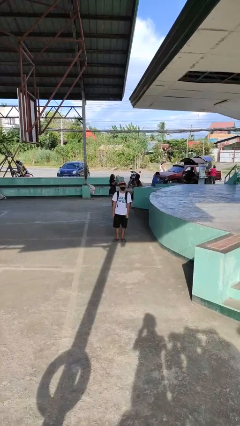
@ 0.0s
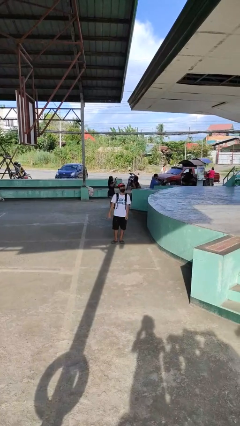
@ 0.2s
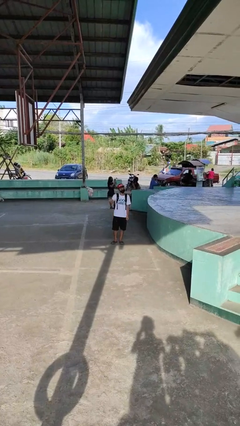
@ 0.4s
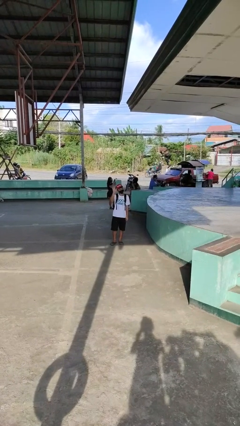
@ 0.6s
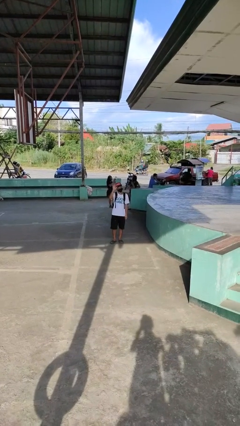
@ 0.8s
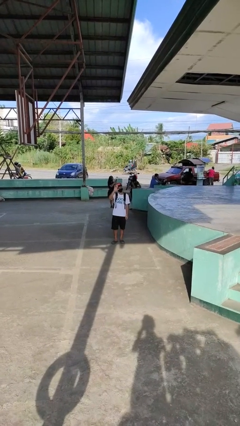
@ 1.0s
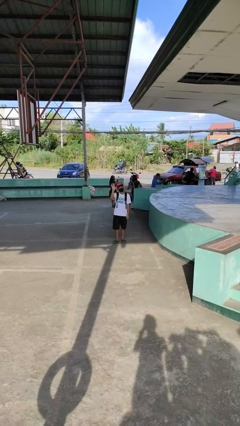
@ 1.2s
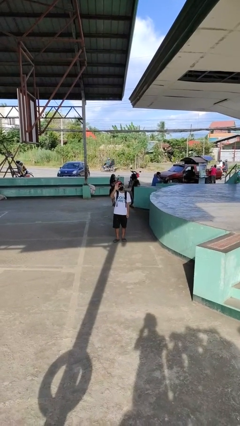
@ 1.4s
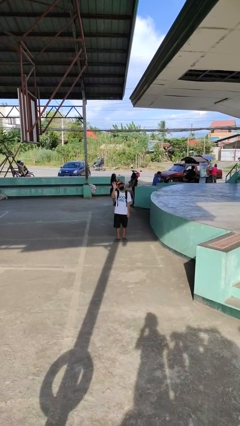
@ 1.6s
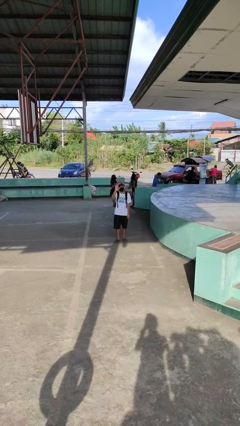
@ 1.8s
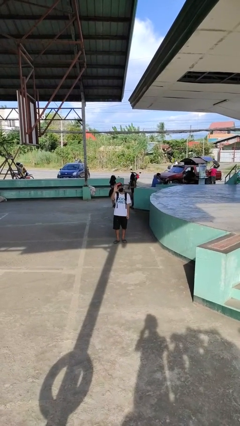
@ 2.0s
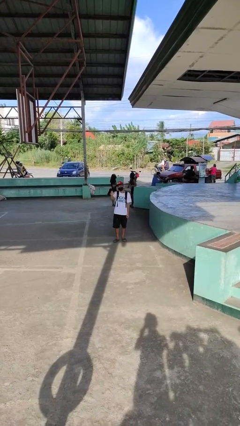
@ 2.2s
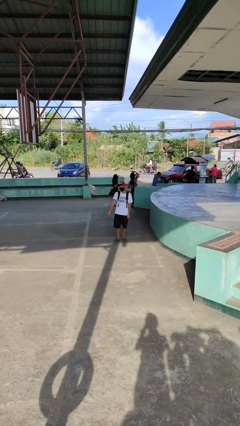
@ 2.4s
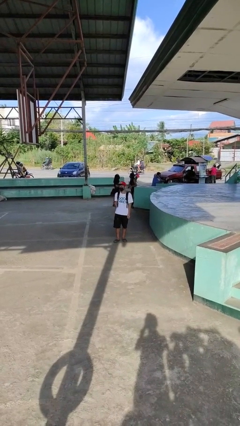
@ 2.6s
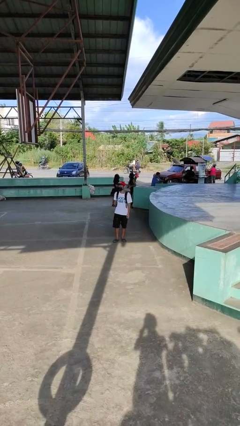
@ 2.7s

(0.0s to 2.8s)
person waves at person

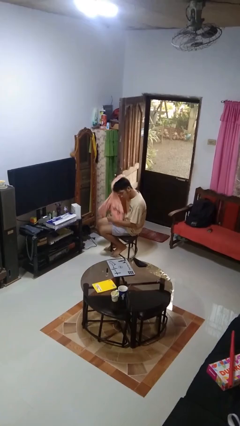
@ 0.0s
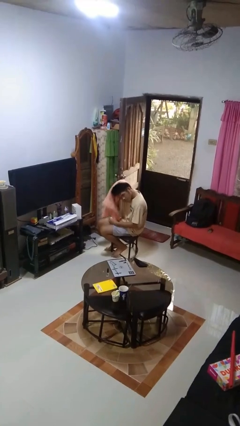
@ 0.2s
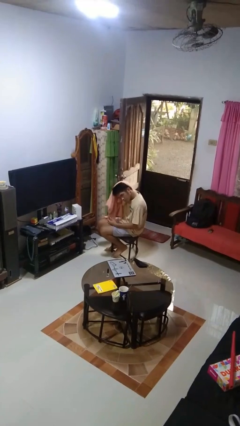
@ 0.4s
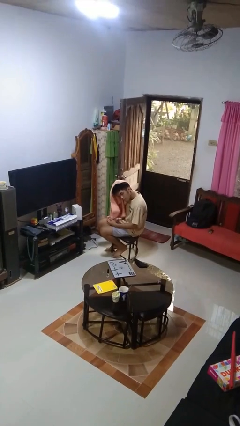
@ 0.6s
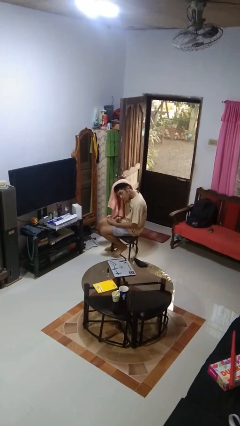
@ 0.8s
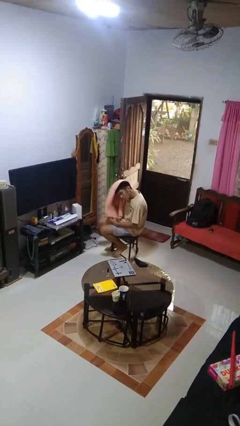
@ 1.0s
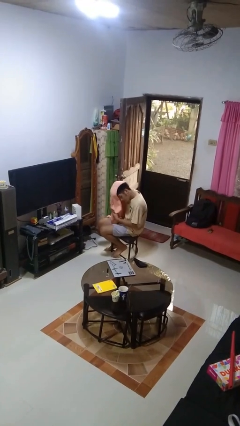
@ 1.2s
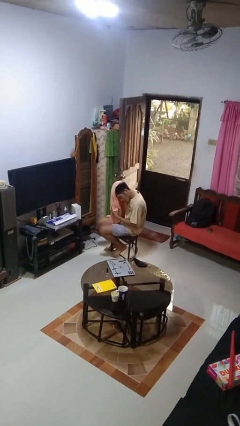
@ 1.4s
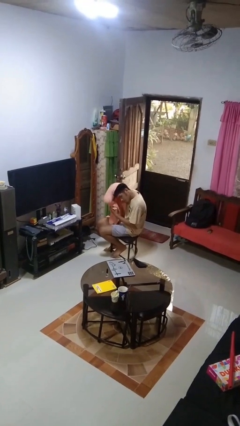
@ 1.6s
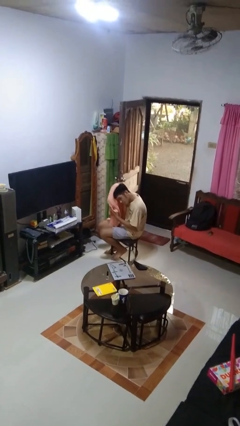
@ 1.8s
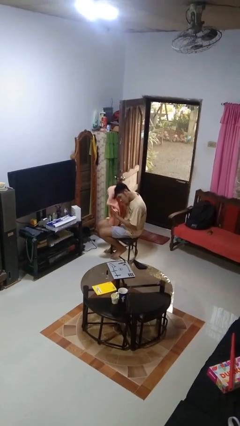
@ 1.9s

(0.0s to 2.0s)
person dries hair with towel

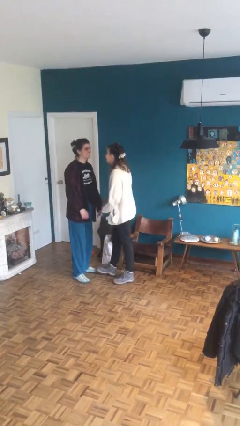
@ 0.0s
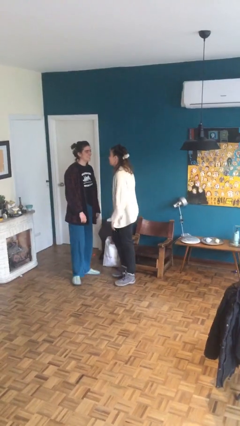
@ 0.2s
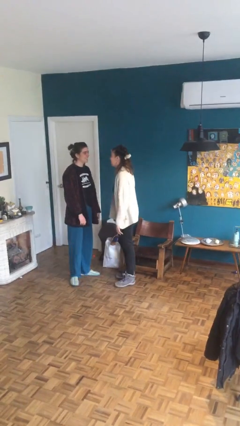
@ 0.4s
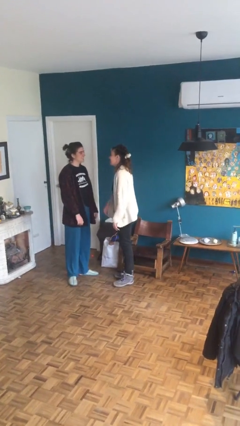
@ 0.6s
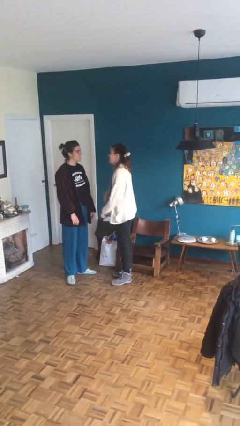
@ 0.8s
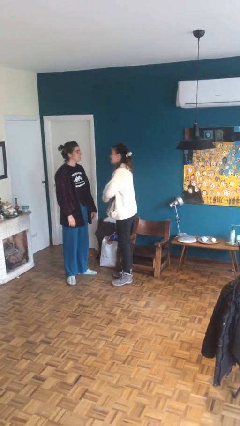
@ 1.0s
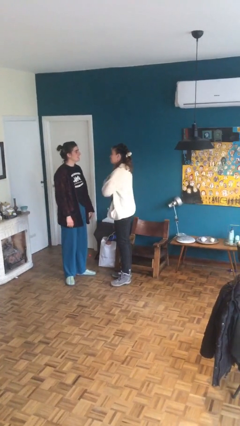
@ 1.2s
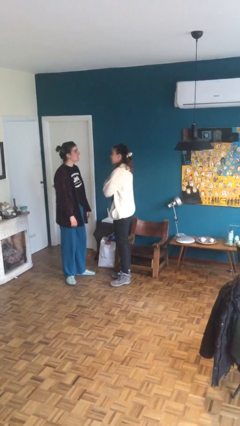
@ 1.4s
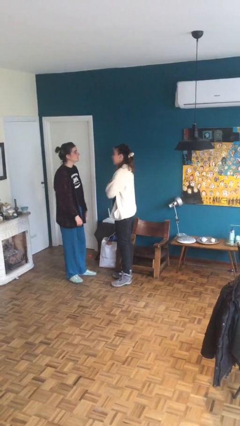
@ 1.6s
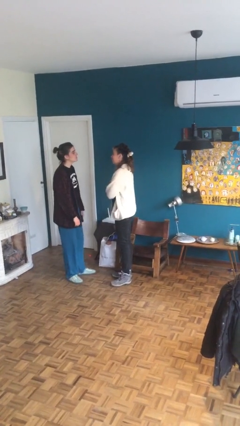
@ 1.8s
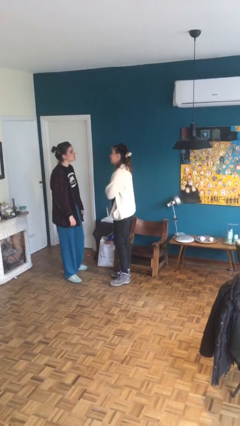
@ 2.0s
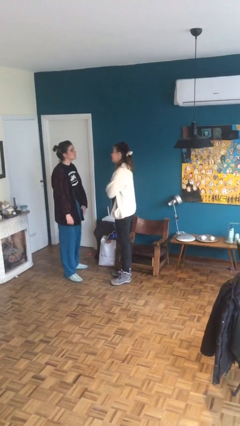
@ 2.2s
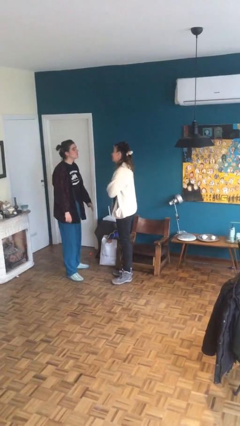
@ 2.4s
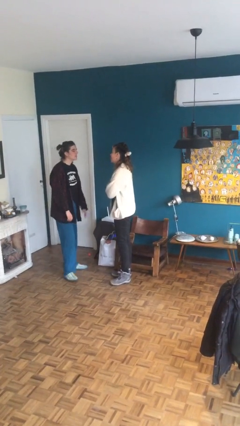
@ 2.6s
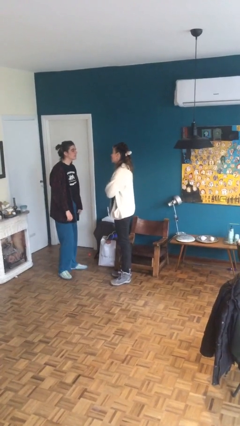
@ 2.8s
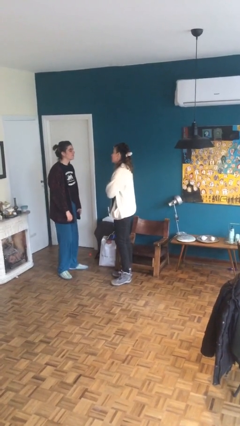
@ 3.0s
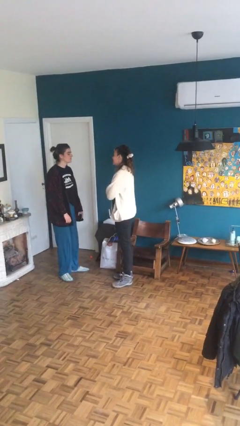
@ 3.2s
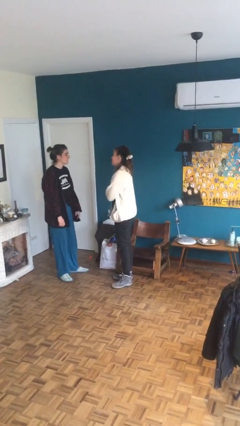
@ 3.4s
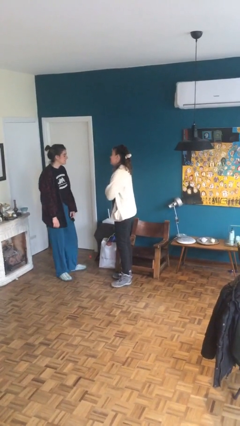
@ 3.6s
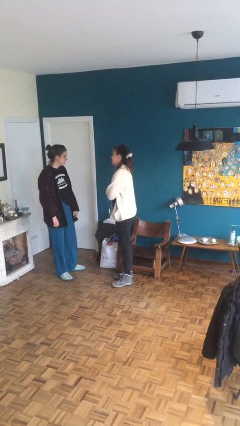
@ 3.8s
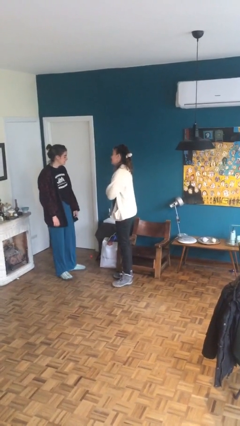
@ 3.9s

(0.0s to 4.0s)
person talks to person

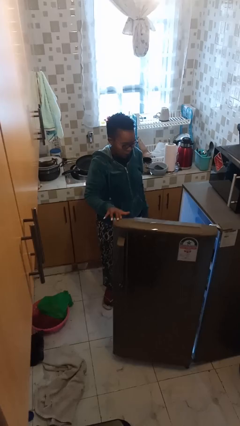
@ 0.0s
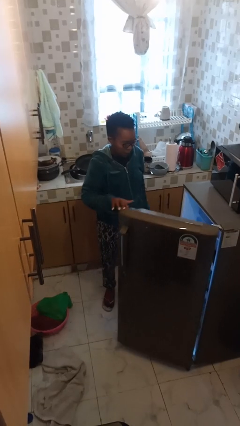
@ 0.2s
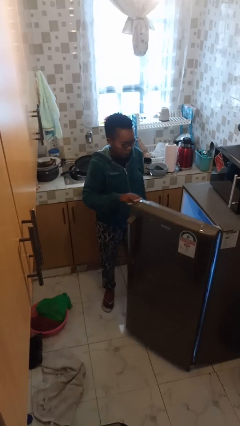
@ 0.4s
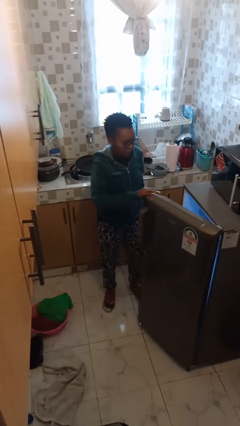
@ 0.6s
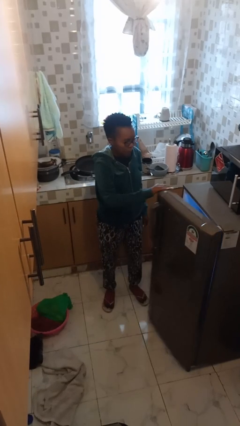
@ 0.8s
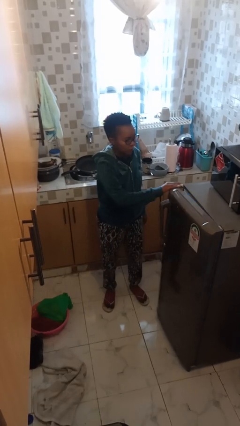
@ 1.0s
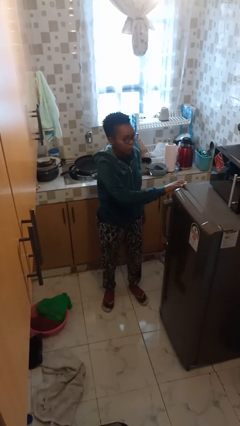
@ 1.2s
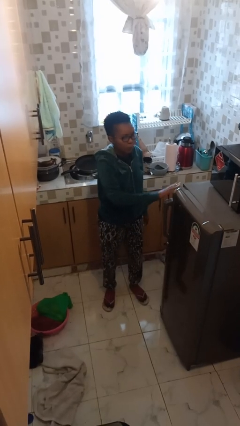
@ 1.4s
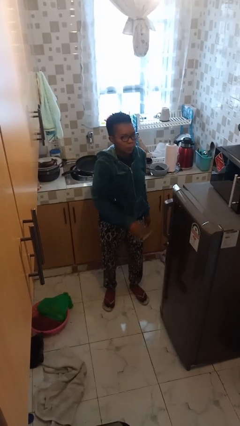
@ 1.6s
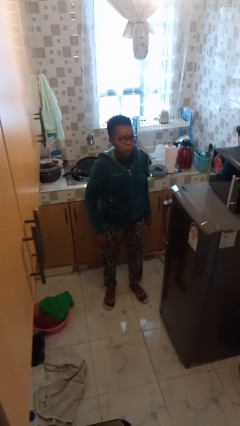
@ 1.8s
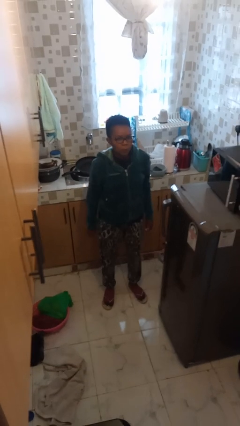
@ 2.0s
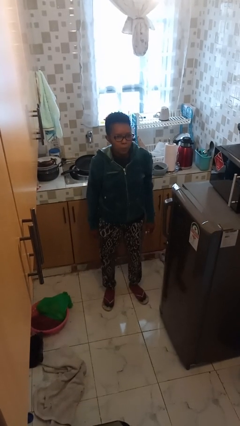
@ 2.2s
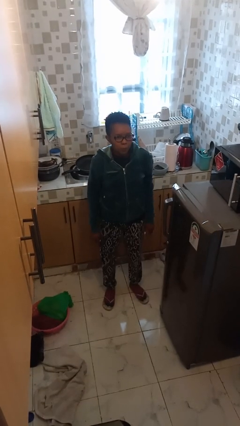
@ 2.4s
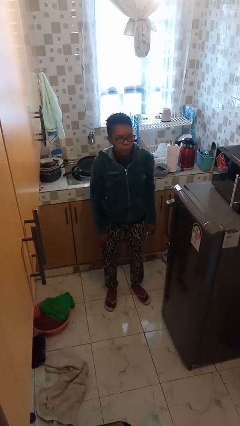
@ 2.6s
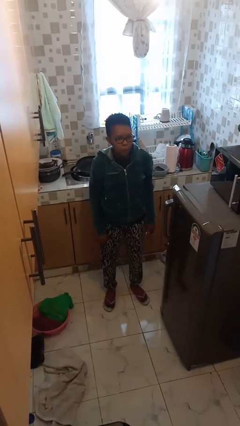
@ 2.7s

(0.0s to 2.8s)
person closes refrigerator

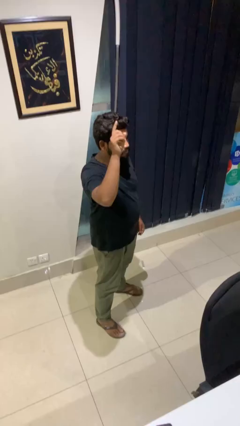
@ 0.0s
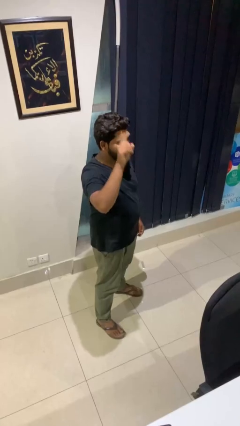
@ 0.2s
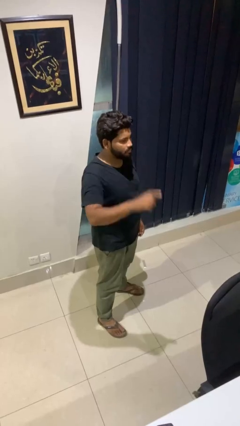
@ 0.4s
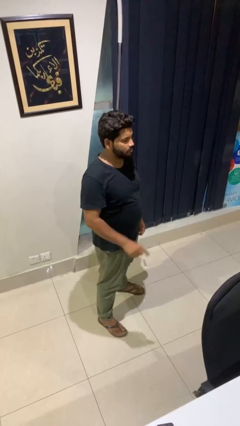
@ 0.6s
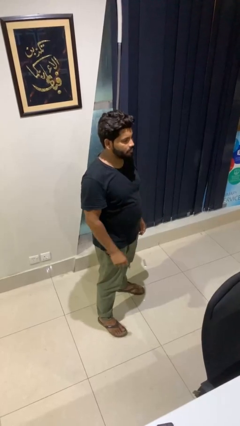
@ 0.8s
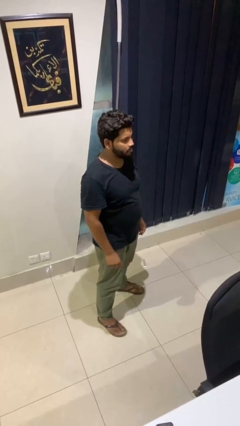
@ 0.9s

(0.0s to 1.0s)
person gestures lower hand

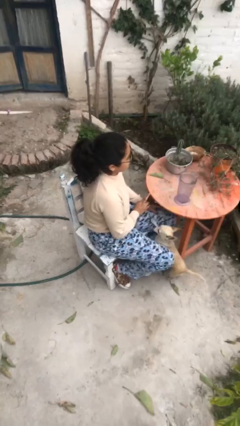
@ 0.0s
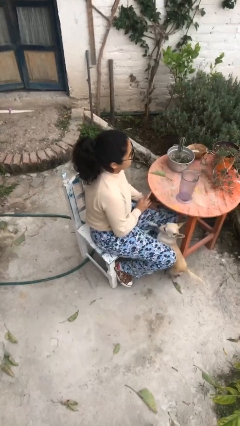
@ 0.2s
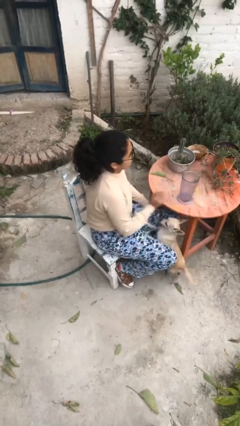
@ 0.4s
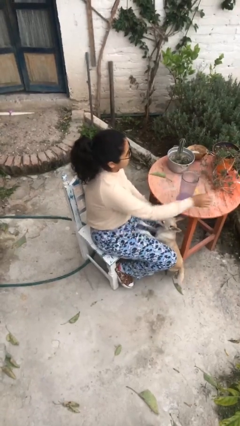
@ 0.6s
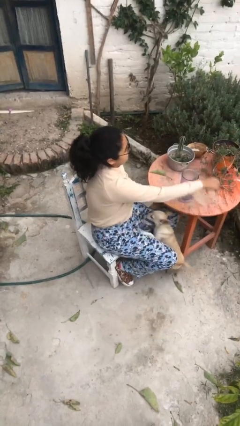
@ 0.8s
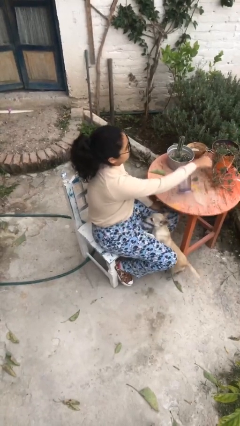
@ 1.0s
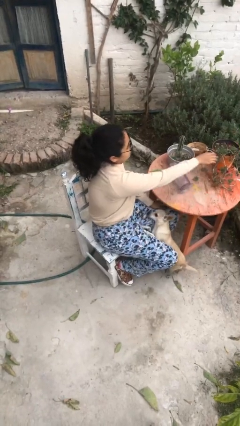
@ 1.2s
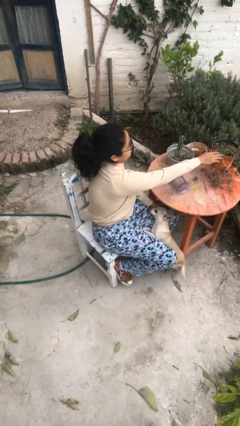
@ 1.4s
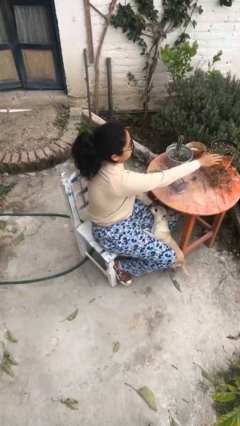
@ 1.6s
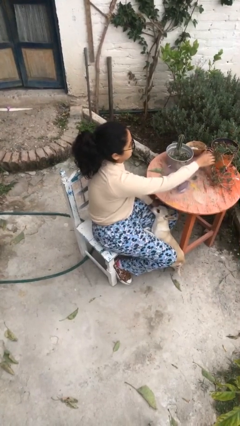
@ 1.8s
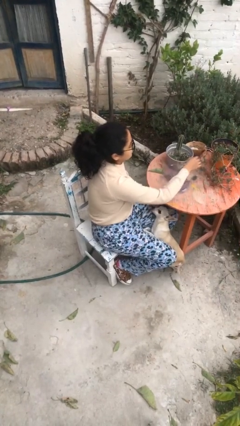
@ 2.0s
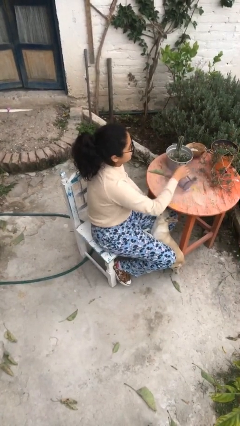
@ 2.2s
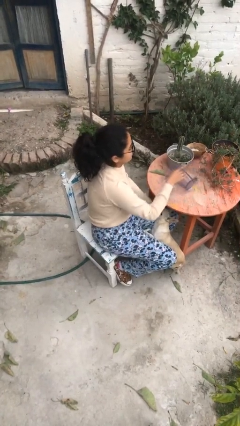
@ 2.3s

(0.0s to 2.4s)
person knocks over glass

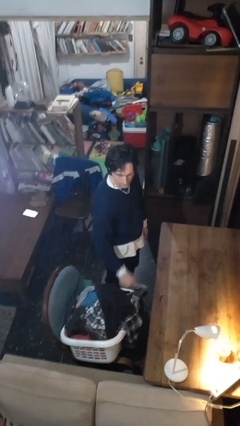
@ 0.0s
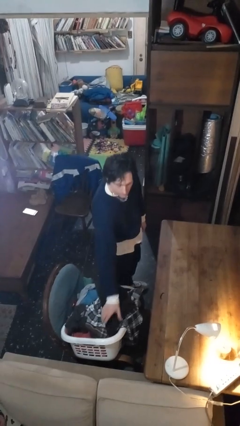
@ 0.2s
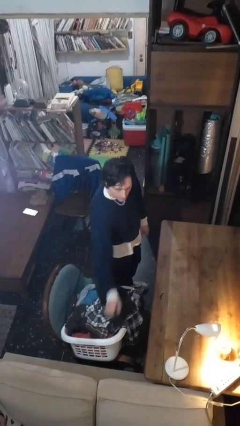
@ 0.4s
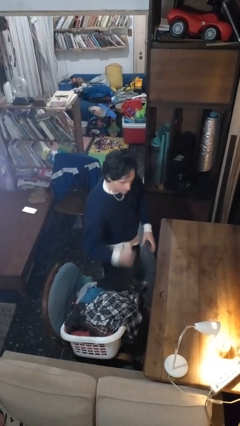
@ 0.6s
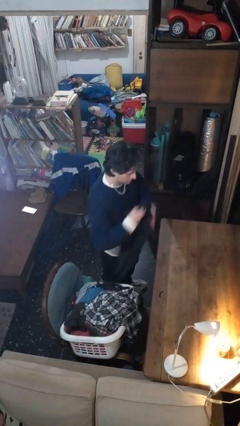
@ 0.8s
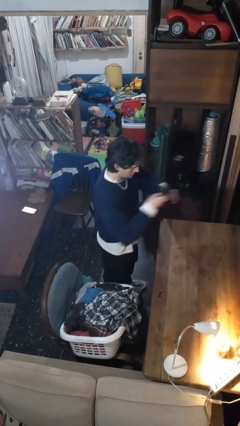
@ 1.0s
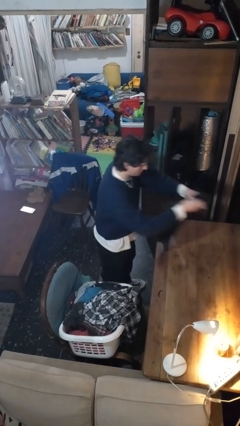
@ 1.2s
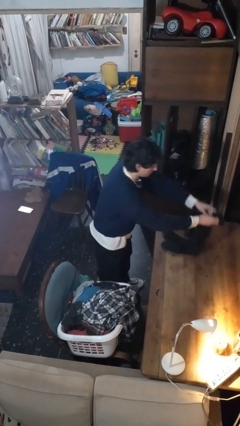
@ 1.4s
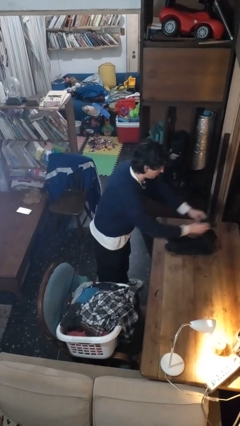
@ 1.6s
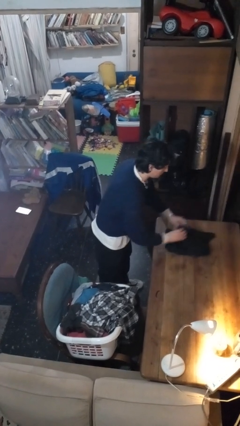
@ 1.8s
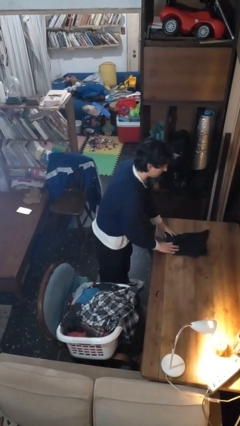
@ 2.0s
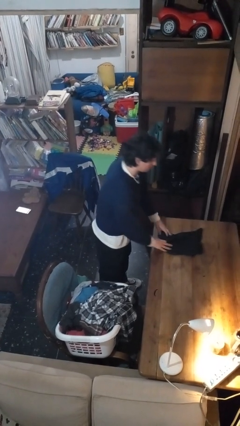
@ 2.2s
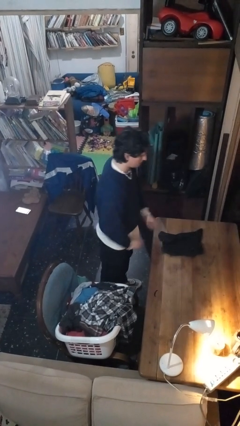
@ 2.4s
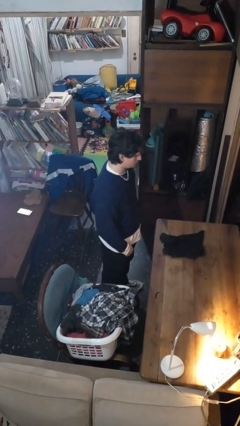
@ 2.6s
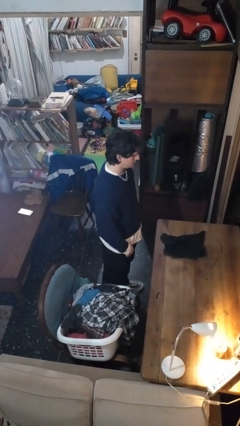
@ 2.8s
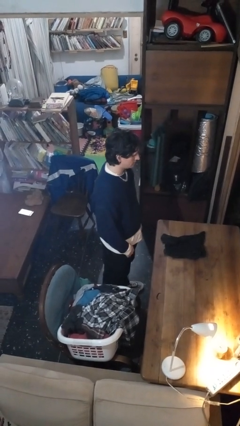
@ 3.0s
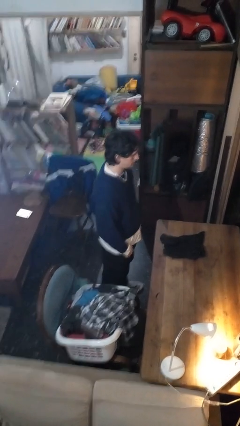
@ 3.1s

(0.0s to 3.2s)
person folds shirt
